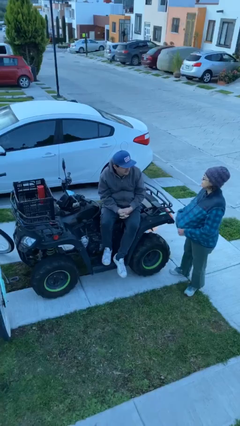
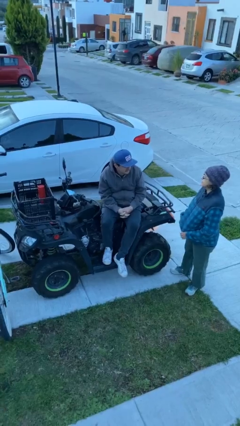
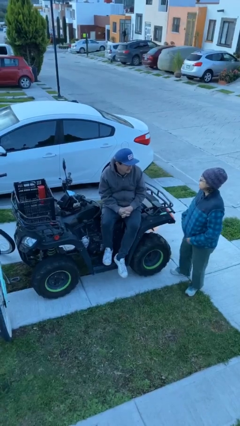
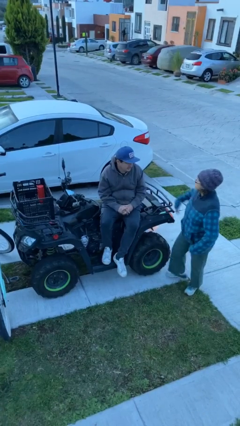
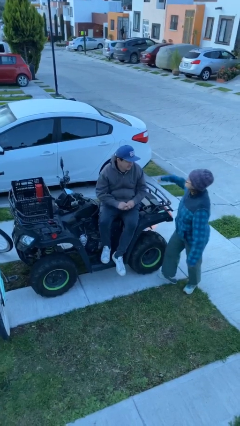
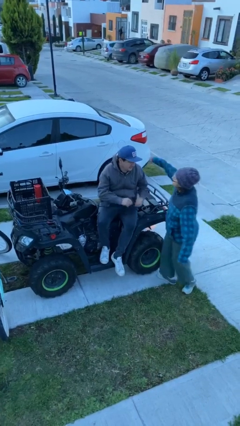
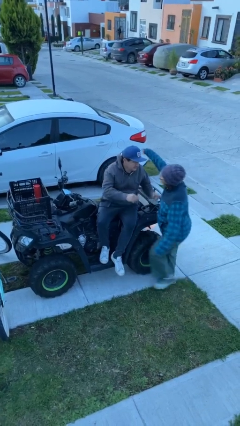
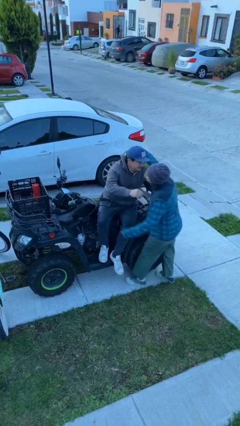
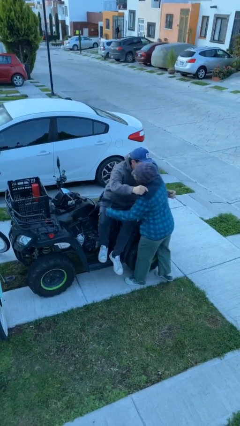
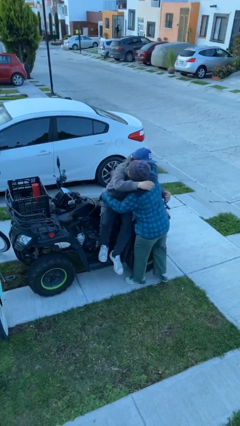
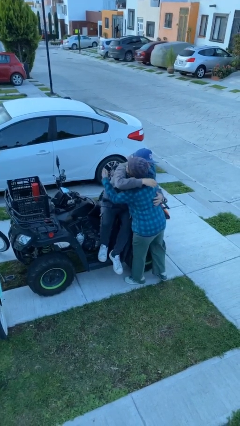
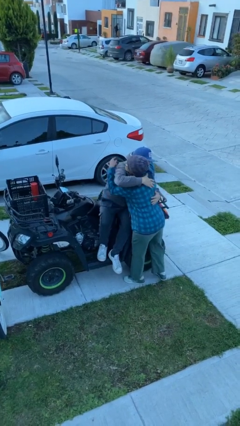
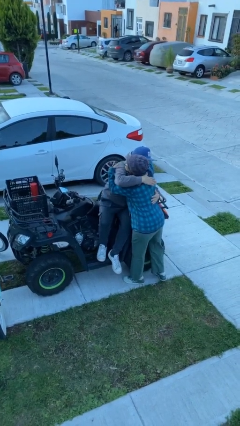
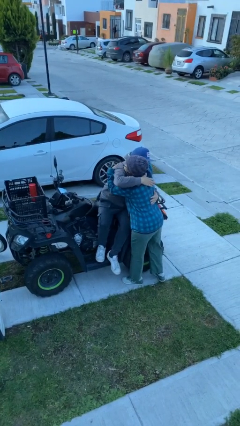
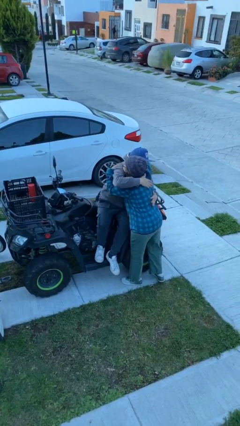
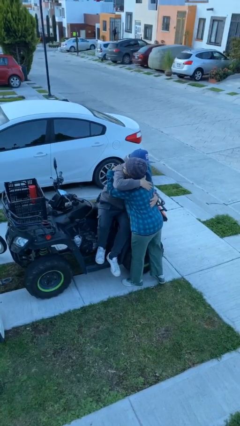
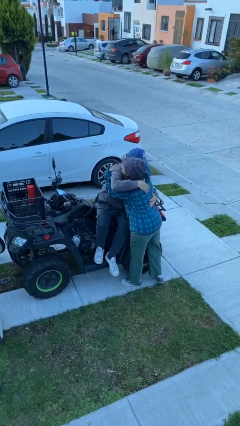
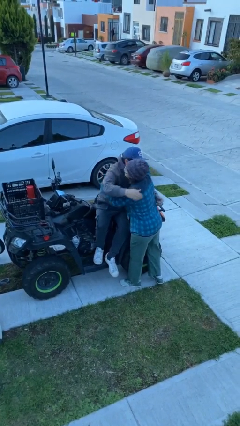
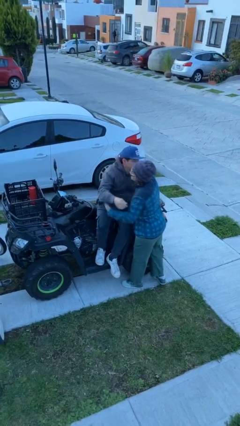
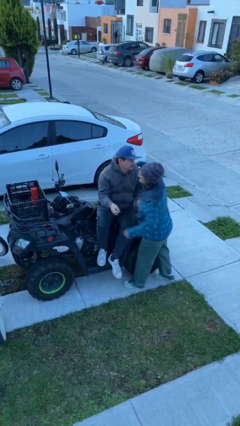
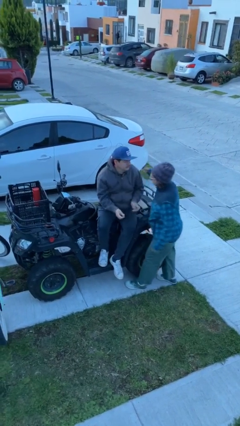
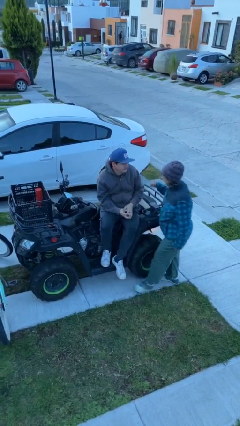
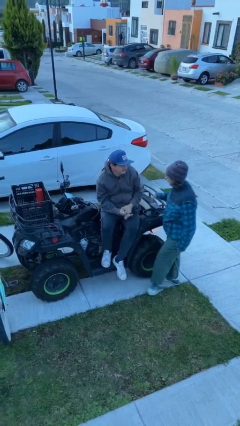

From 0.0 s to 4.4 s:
person embraces person
